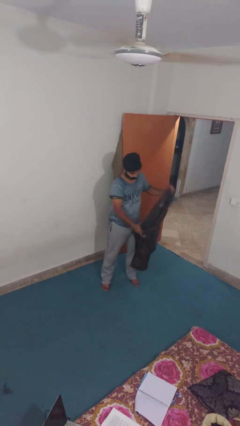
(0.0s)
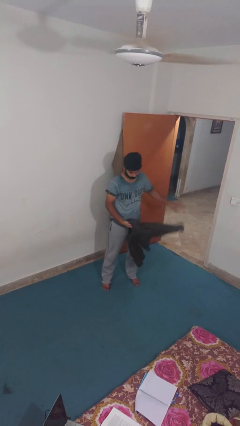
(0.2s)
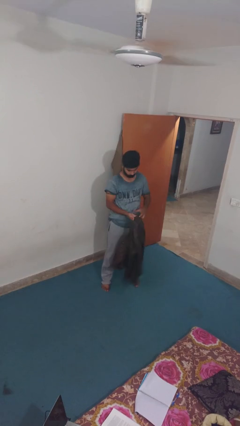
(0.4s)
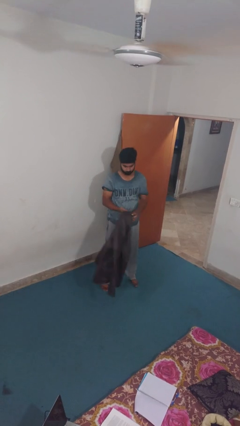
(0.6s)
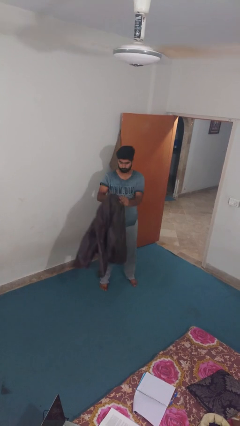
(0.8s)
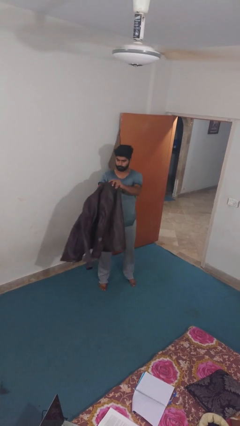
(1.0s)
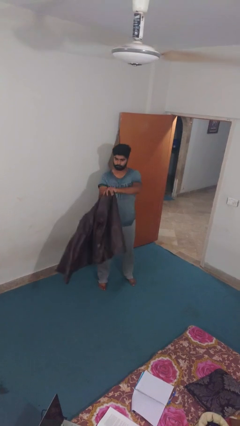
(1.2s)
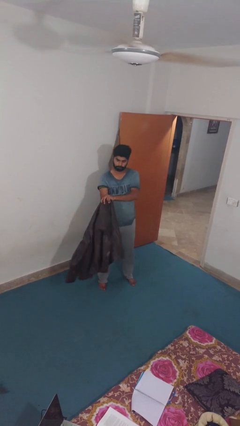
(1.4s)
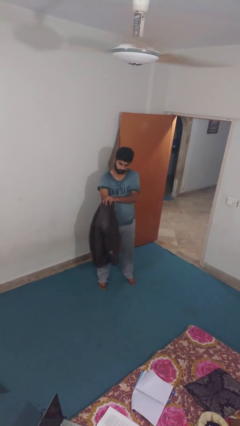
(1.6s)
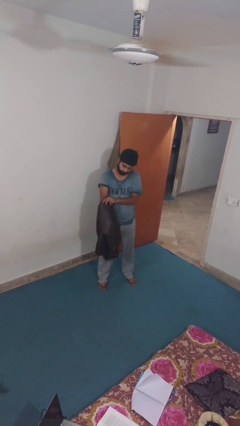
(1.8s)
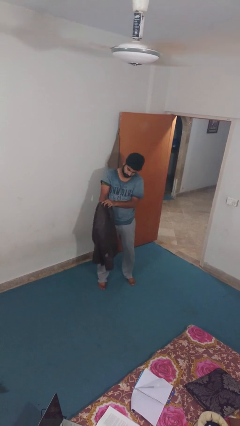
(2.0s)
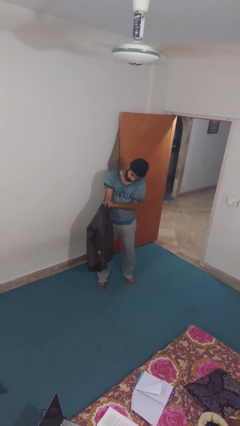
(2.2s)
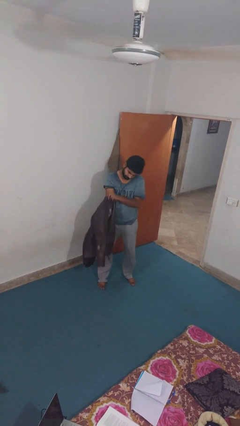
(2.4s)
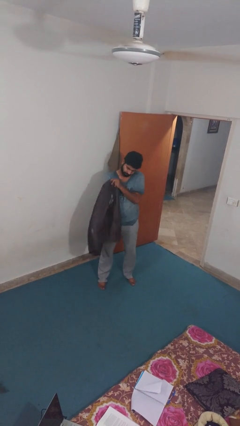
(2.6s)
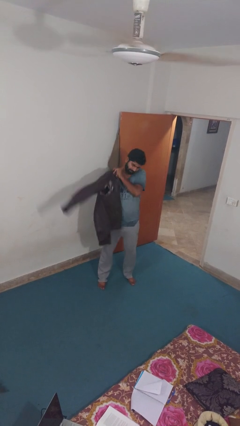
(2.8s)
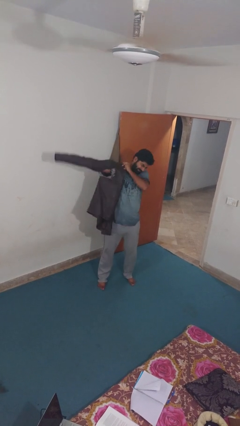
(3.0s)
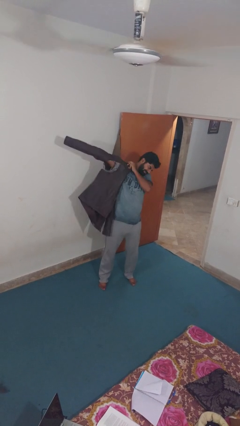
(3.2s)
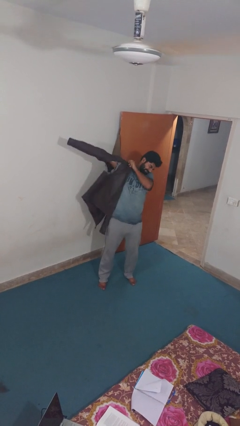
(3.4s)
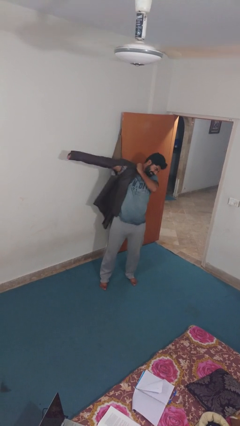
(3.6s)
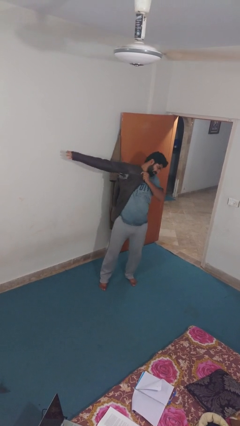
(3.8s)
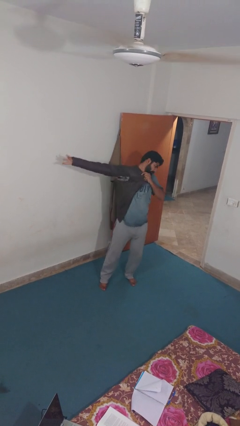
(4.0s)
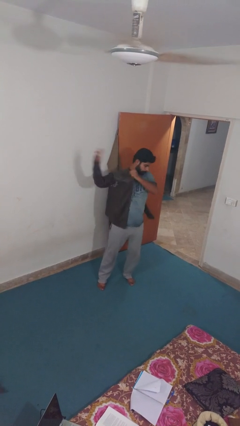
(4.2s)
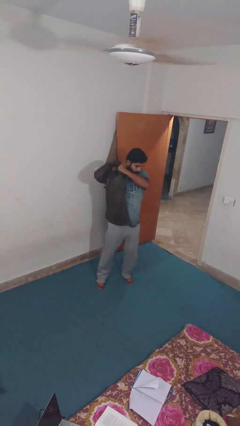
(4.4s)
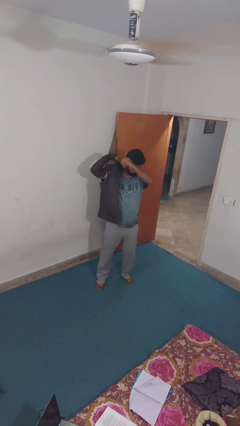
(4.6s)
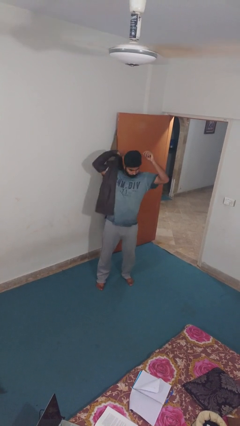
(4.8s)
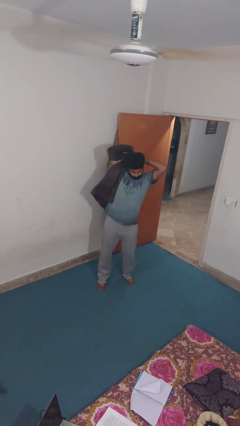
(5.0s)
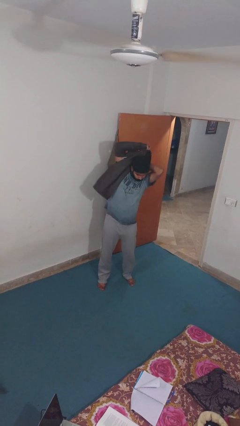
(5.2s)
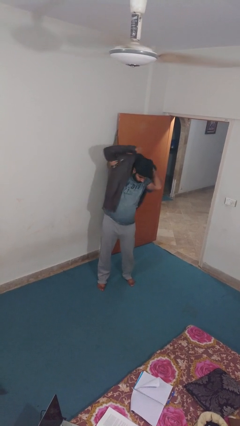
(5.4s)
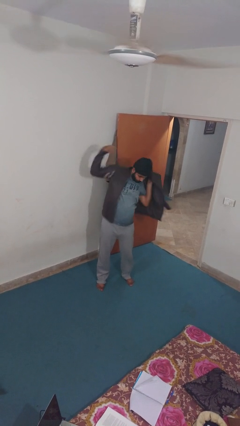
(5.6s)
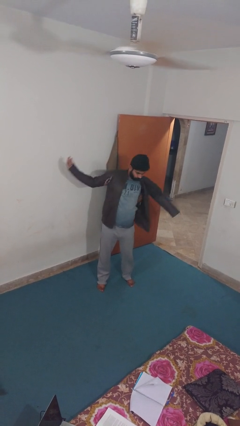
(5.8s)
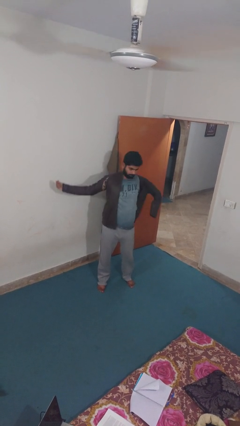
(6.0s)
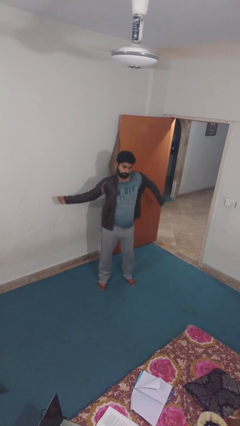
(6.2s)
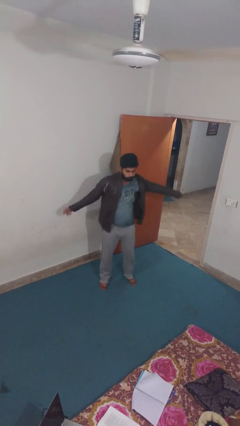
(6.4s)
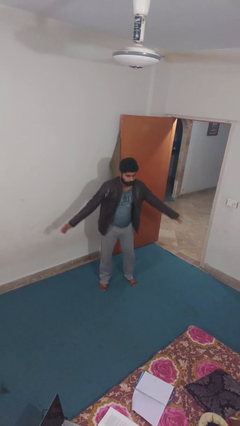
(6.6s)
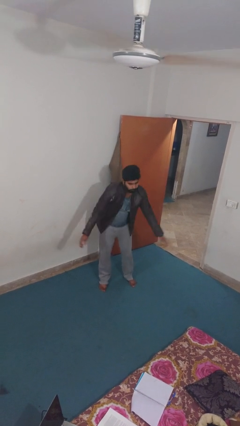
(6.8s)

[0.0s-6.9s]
person puts on jacket

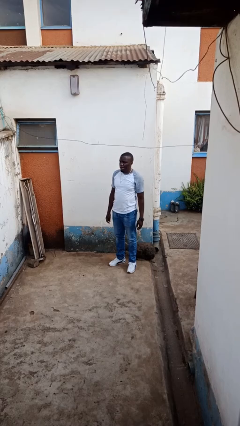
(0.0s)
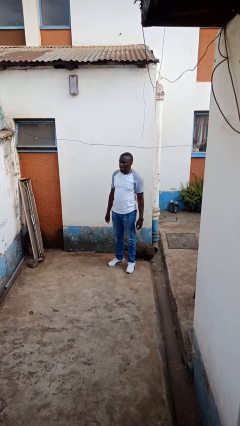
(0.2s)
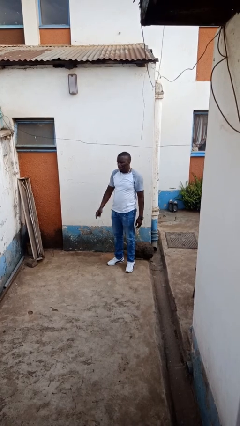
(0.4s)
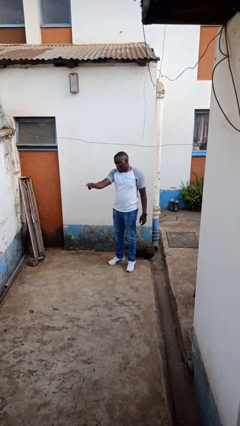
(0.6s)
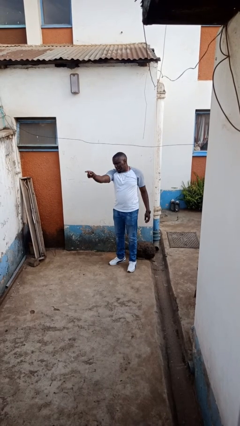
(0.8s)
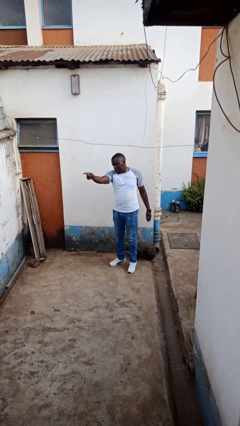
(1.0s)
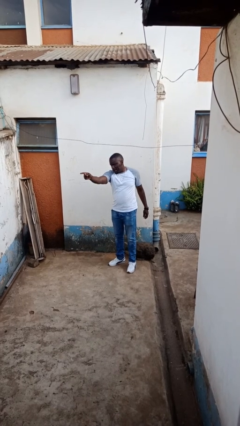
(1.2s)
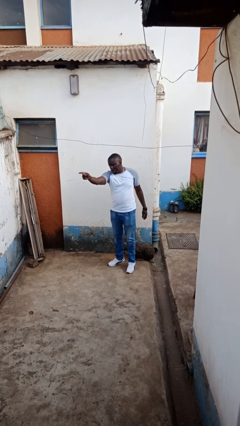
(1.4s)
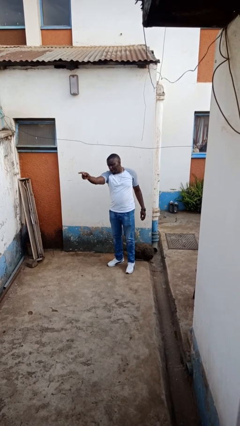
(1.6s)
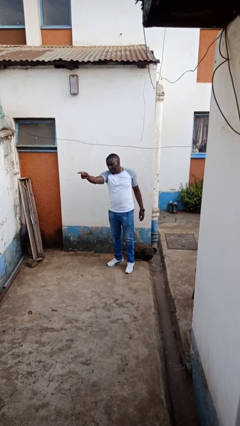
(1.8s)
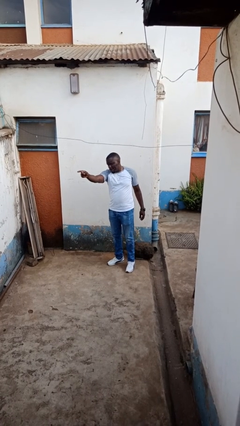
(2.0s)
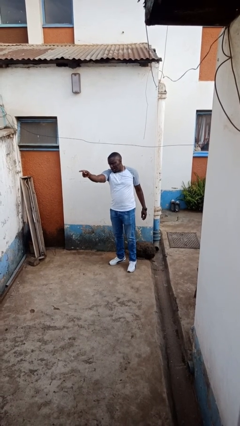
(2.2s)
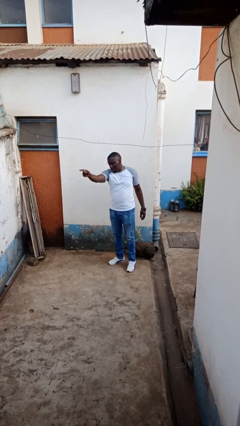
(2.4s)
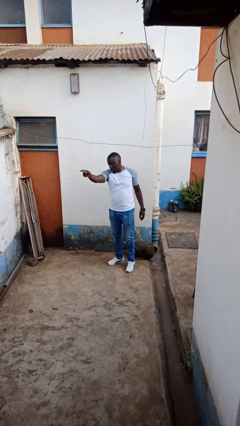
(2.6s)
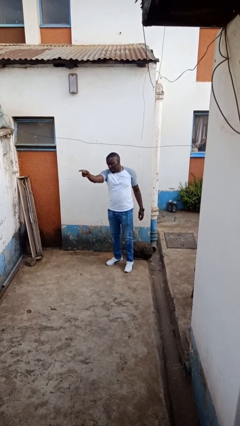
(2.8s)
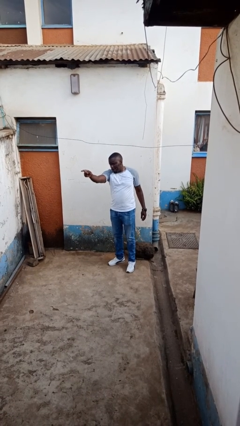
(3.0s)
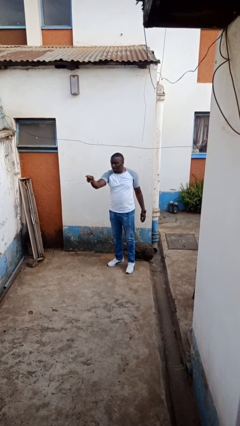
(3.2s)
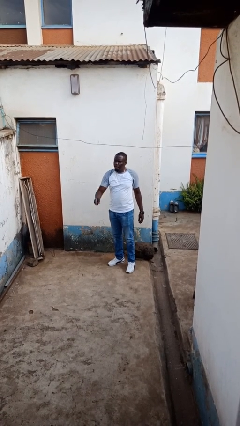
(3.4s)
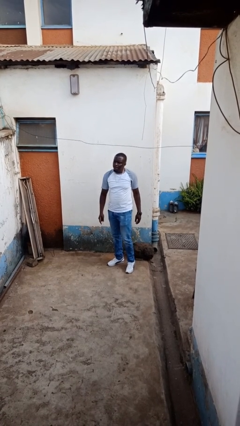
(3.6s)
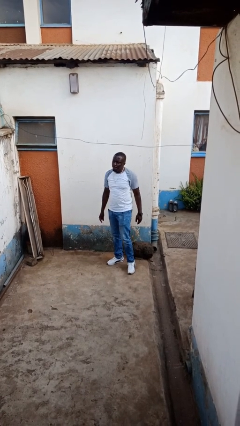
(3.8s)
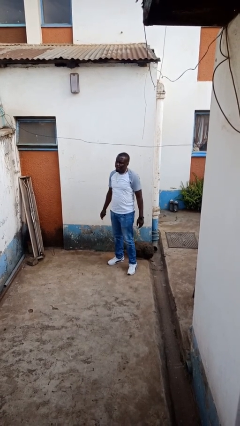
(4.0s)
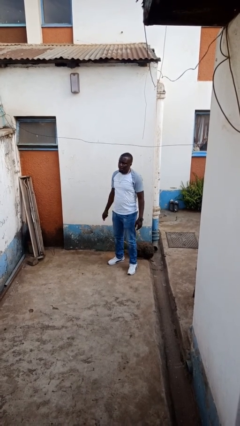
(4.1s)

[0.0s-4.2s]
person points at person

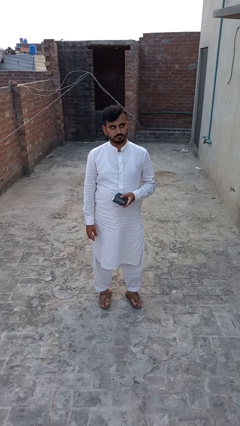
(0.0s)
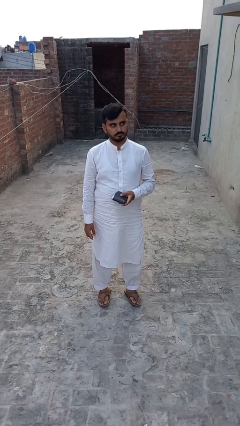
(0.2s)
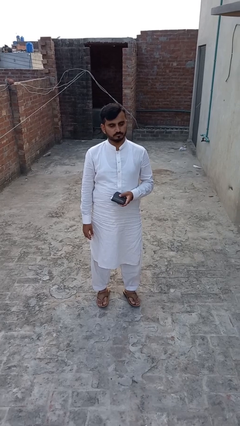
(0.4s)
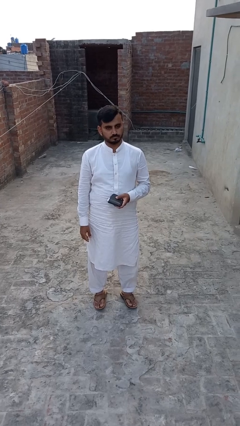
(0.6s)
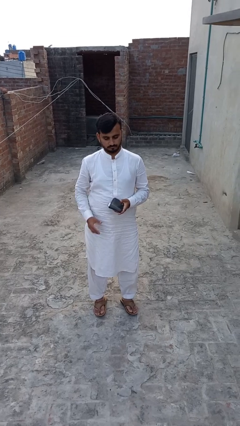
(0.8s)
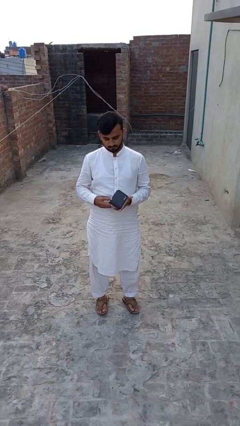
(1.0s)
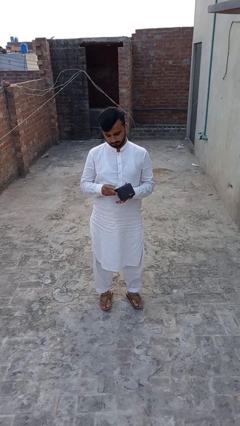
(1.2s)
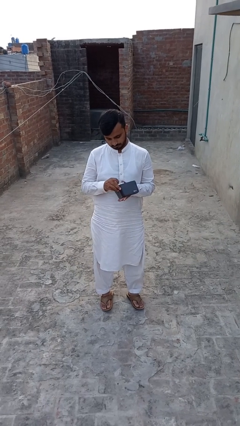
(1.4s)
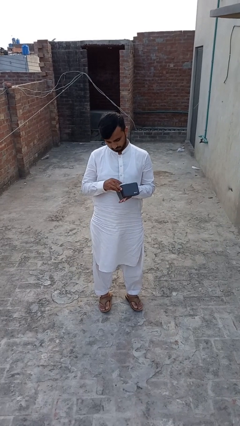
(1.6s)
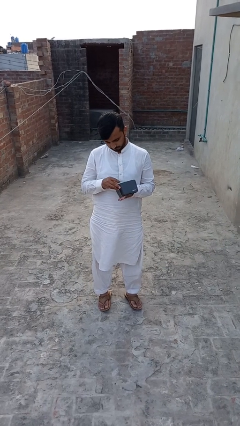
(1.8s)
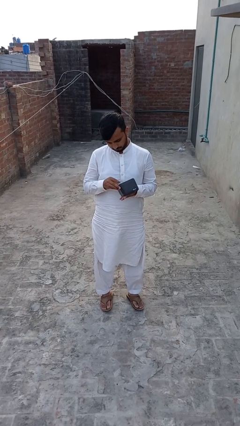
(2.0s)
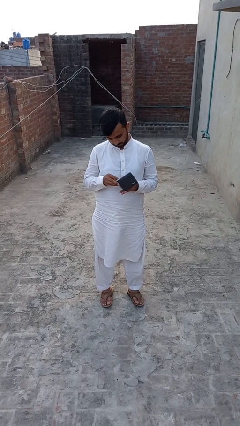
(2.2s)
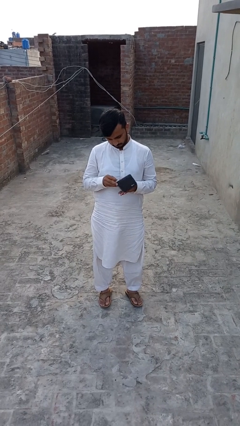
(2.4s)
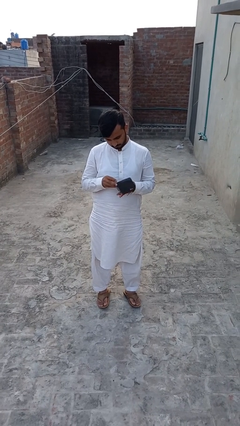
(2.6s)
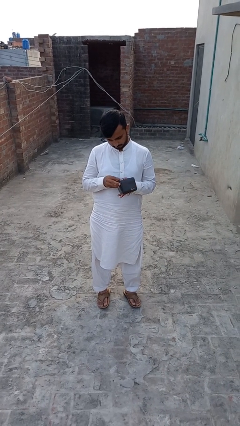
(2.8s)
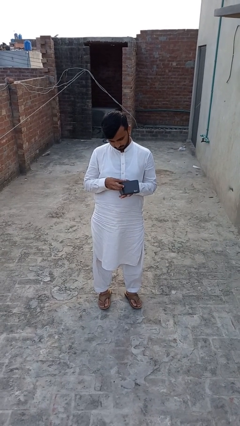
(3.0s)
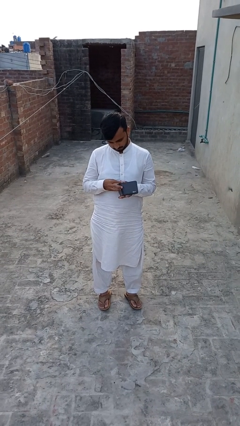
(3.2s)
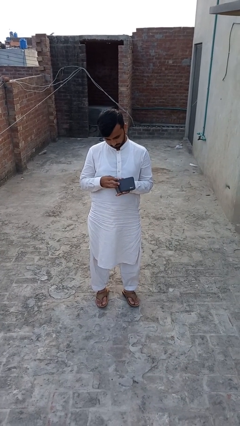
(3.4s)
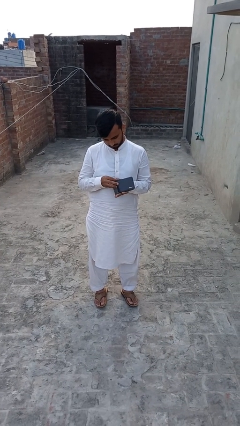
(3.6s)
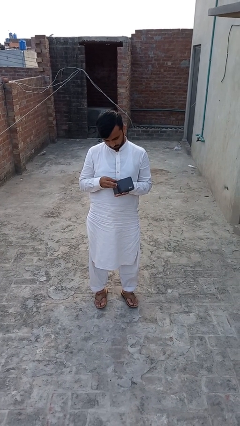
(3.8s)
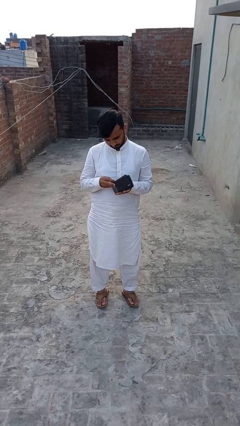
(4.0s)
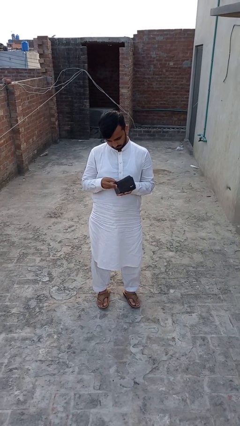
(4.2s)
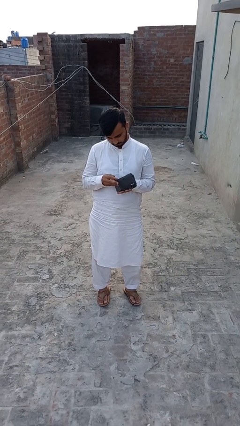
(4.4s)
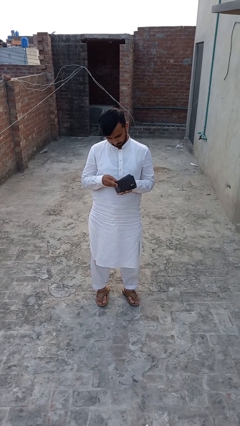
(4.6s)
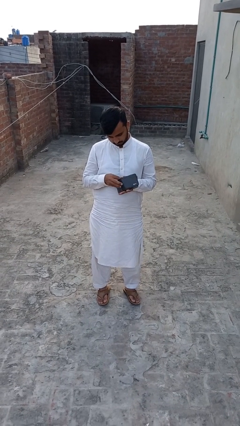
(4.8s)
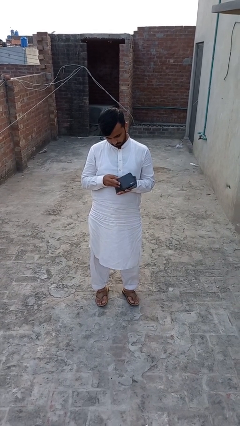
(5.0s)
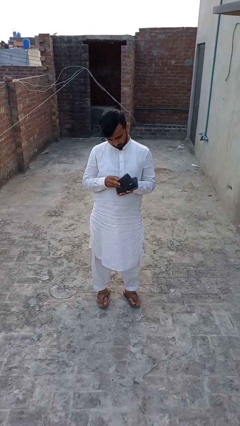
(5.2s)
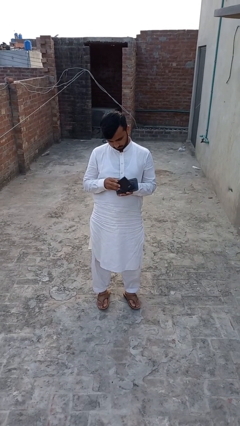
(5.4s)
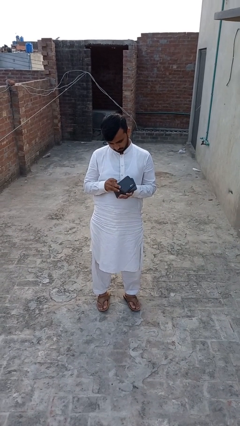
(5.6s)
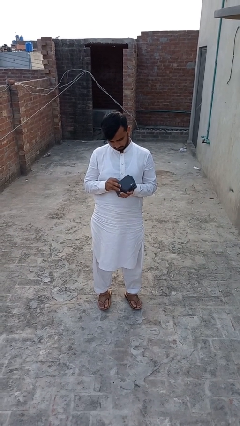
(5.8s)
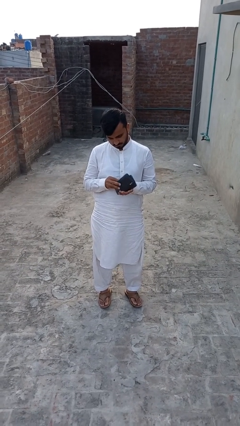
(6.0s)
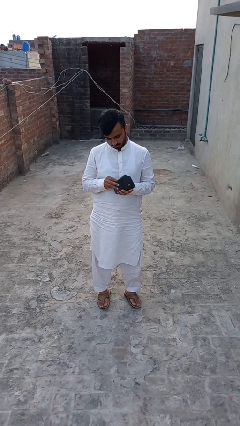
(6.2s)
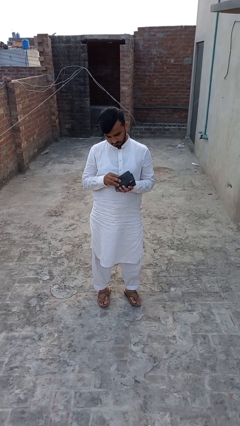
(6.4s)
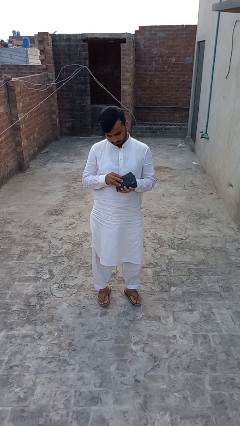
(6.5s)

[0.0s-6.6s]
person searches in purse

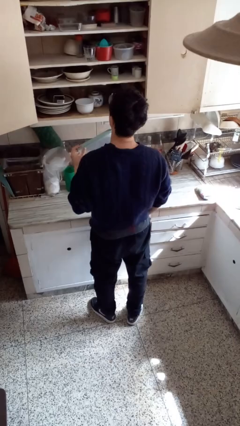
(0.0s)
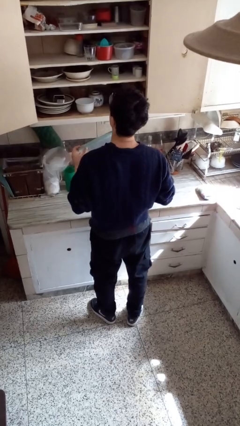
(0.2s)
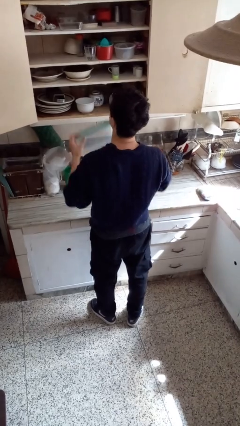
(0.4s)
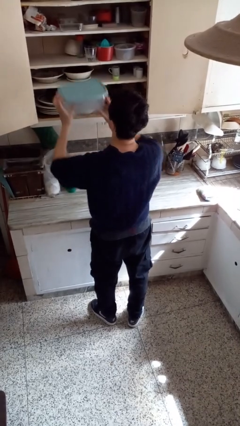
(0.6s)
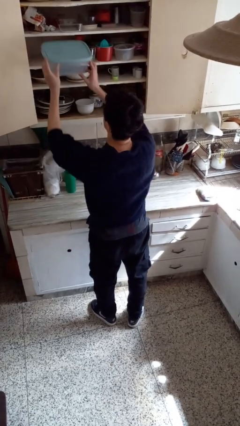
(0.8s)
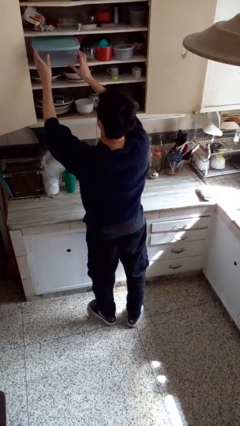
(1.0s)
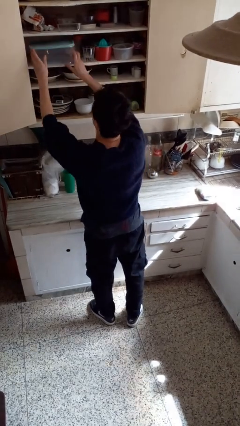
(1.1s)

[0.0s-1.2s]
person puts down object into cabinet
